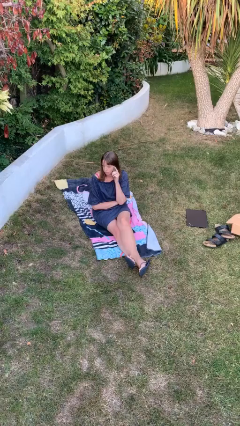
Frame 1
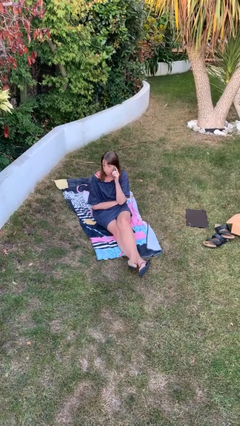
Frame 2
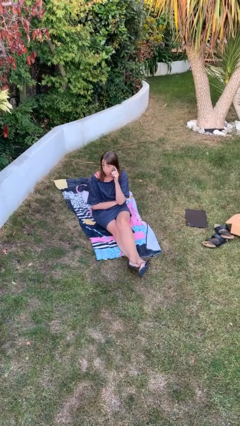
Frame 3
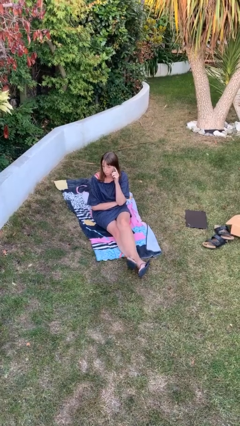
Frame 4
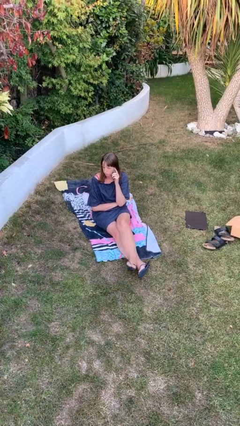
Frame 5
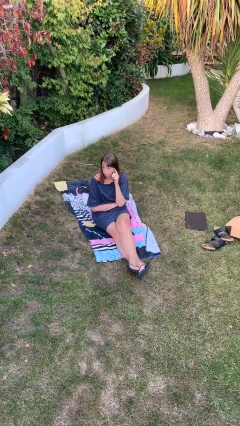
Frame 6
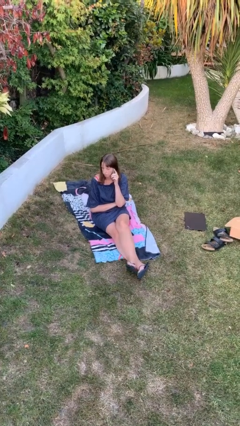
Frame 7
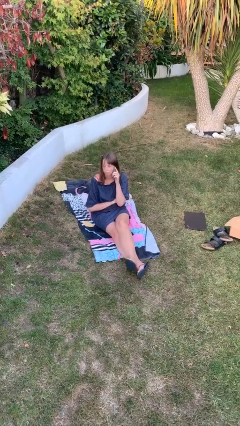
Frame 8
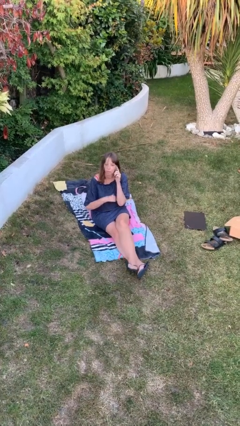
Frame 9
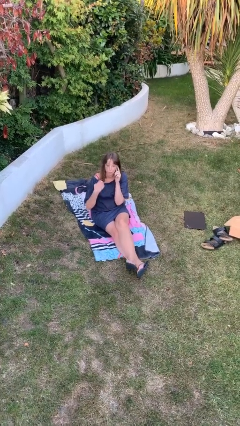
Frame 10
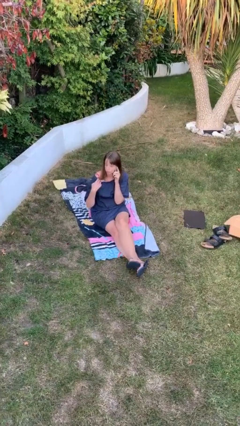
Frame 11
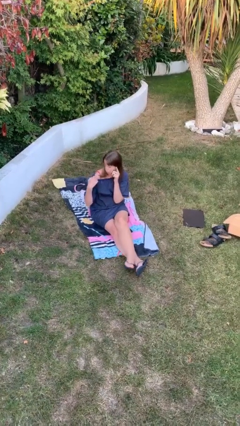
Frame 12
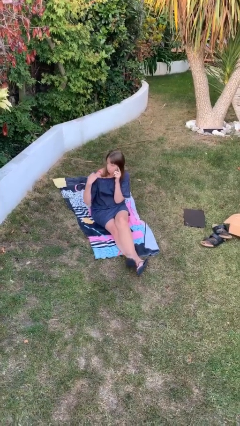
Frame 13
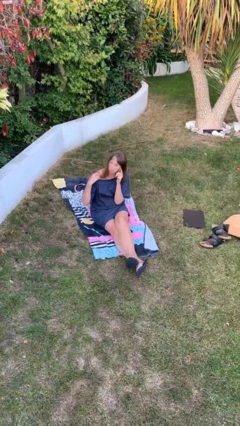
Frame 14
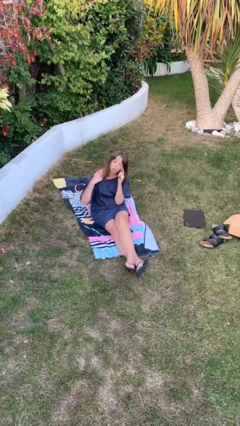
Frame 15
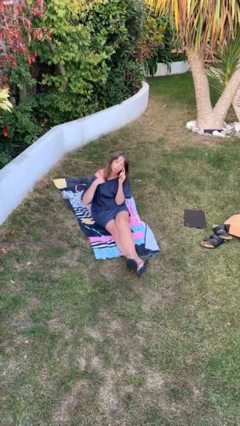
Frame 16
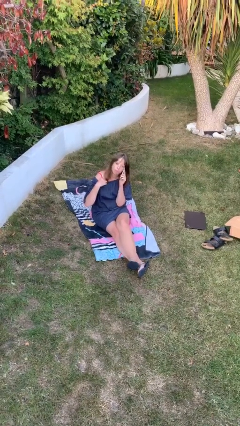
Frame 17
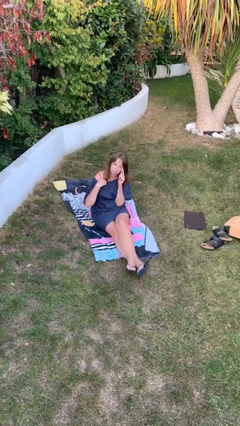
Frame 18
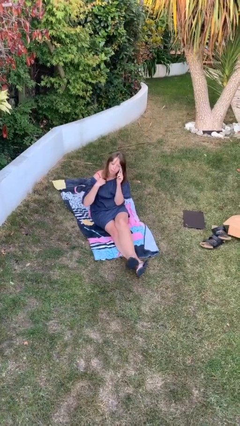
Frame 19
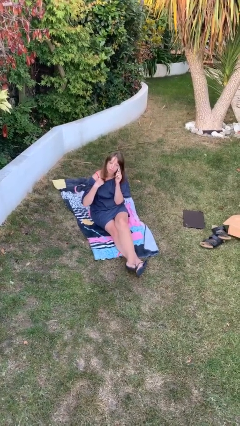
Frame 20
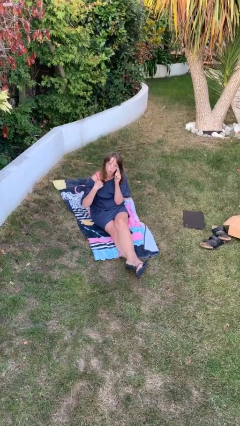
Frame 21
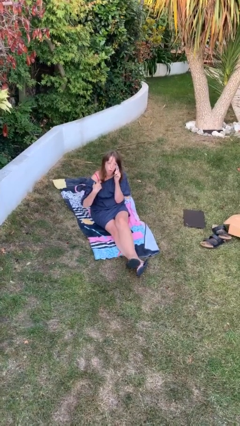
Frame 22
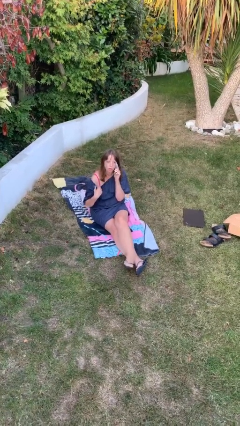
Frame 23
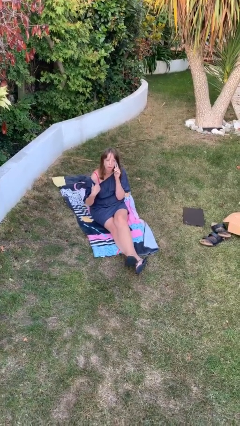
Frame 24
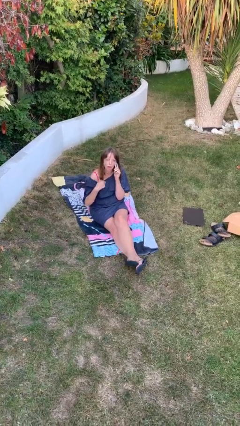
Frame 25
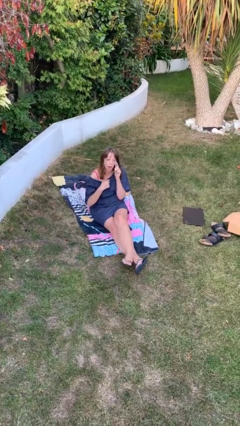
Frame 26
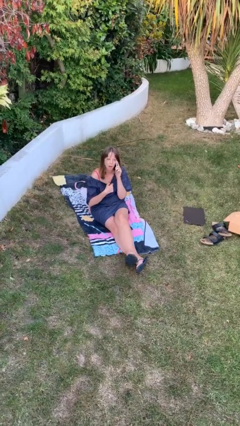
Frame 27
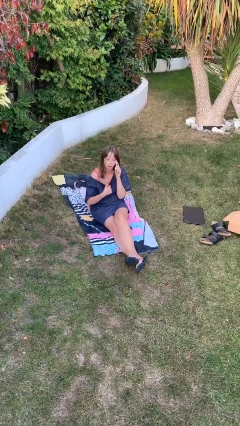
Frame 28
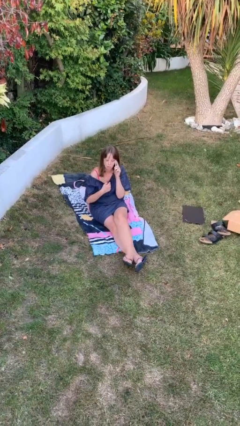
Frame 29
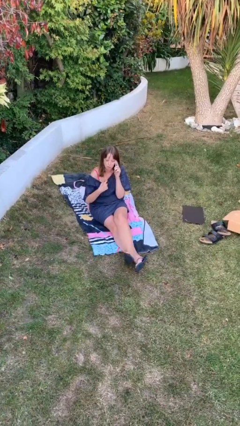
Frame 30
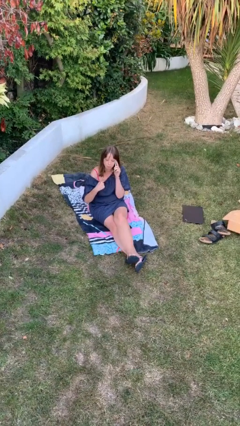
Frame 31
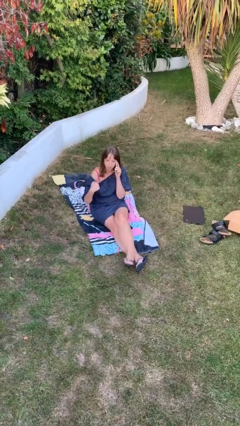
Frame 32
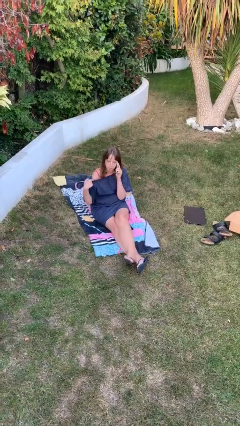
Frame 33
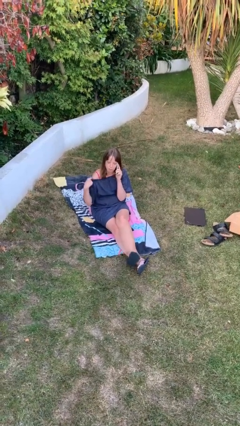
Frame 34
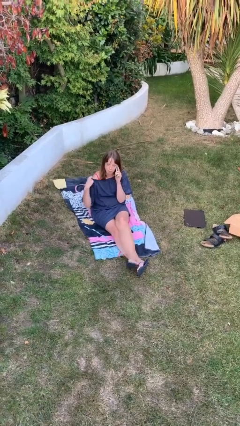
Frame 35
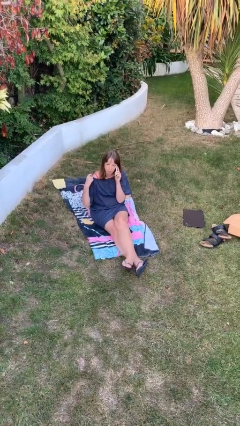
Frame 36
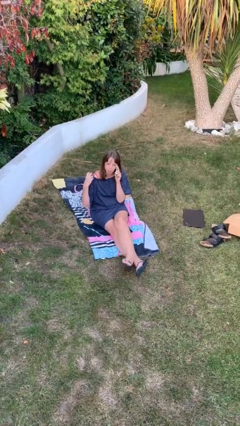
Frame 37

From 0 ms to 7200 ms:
person talks on phone

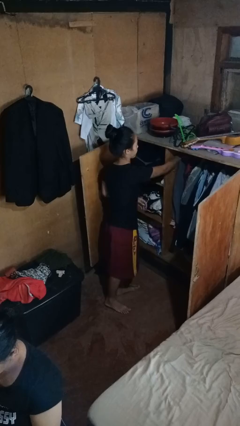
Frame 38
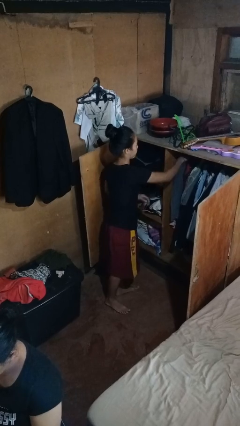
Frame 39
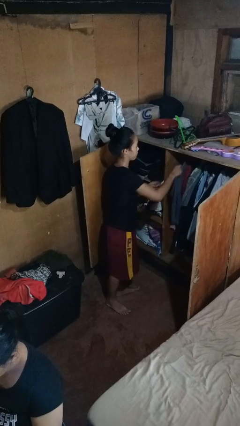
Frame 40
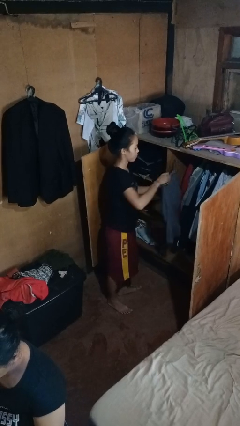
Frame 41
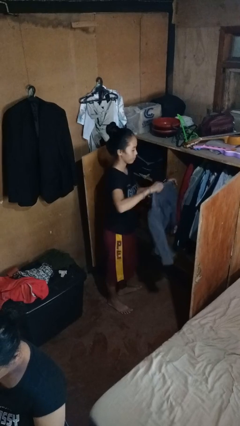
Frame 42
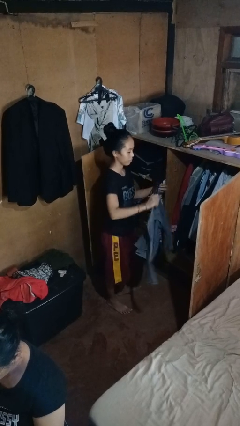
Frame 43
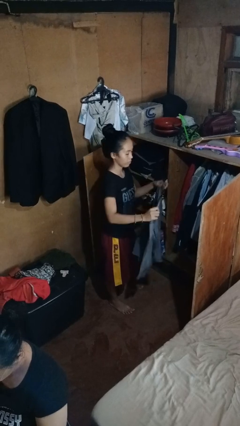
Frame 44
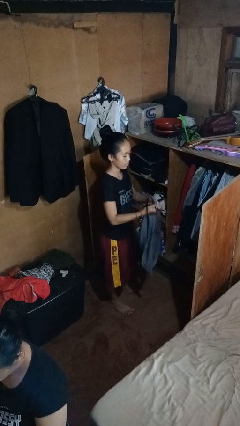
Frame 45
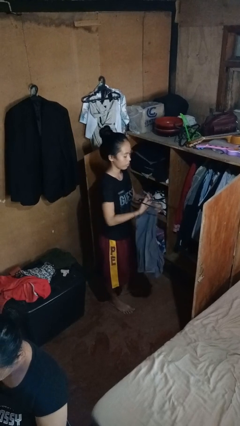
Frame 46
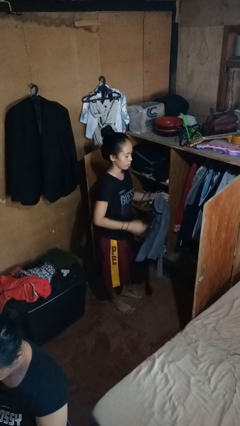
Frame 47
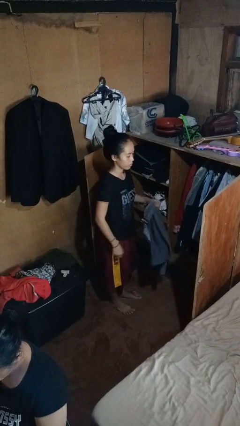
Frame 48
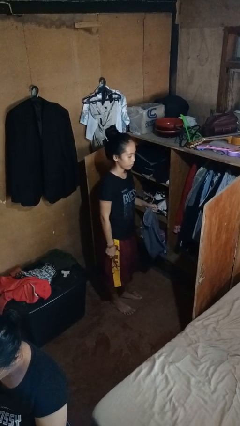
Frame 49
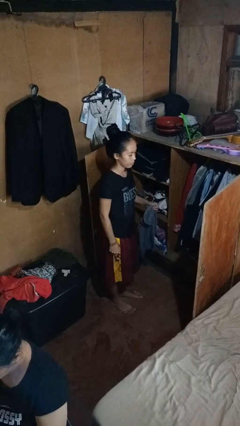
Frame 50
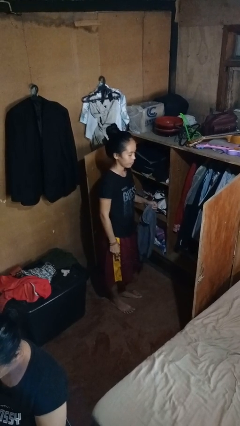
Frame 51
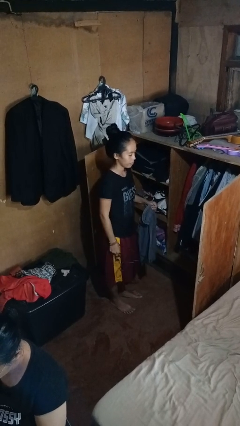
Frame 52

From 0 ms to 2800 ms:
person takes clothes from closet

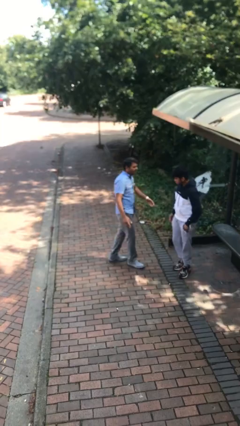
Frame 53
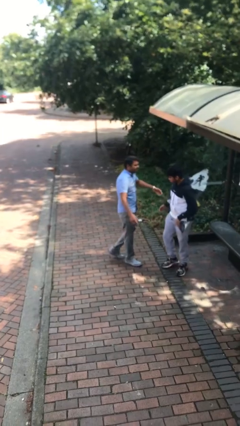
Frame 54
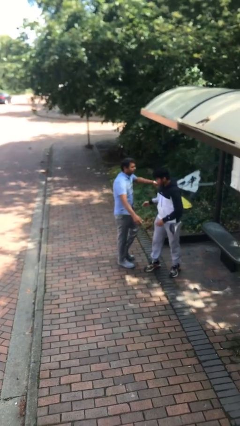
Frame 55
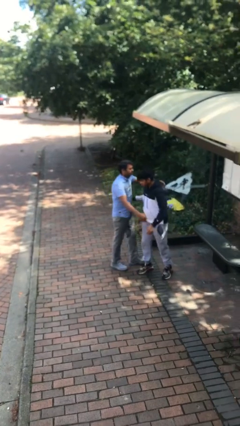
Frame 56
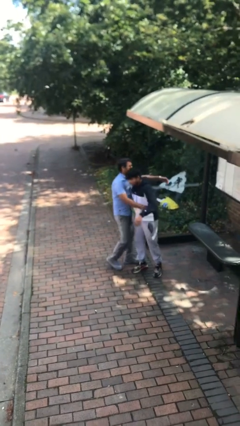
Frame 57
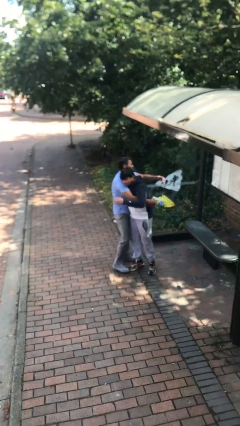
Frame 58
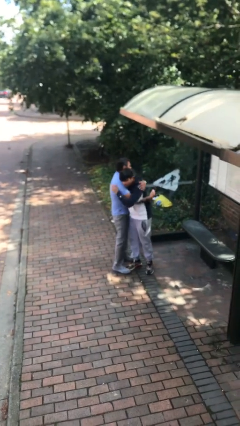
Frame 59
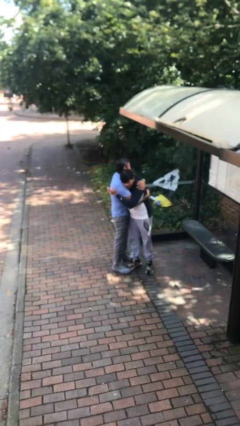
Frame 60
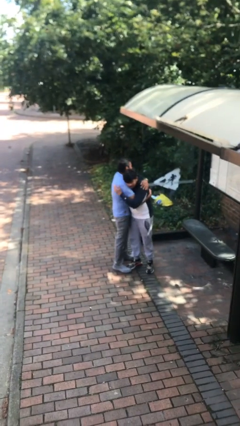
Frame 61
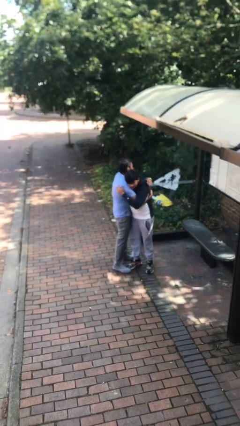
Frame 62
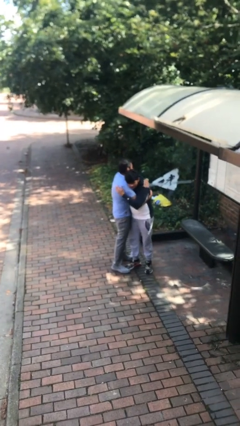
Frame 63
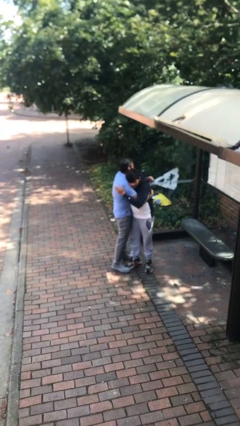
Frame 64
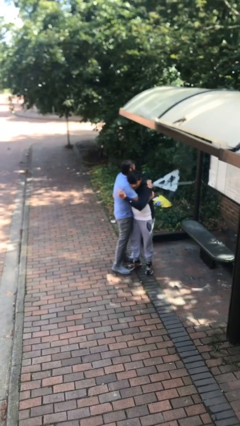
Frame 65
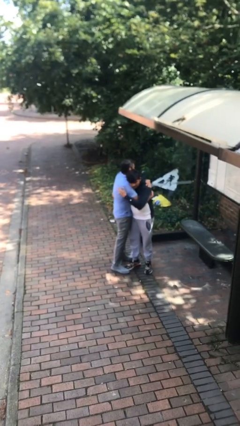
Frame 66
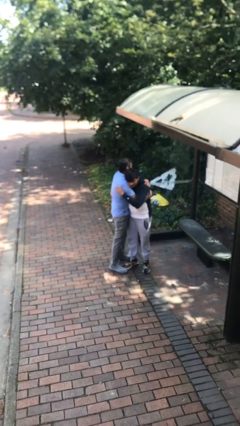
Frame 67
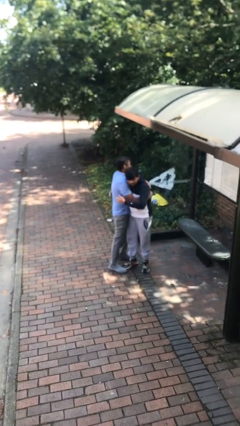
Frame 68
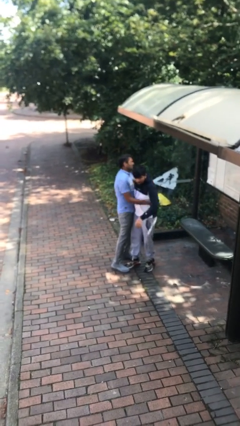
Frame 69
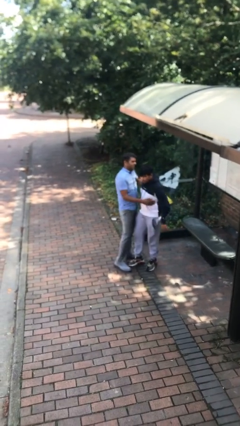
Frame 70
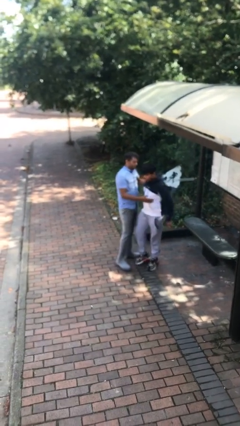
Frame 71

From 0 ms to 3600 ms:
person embraces person

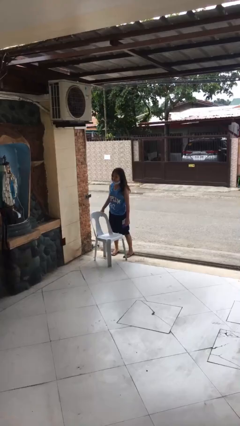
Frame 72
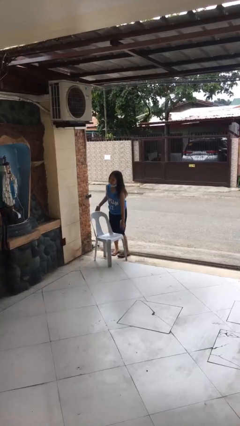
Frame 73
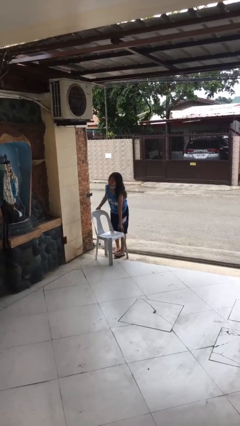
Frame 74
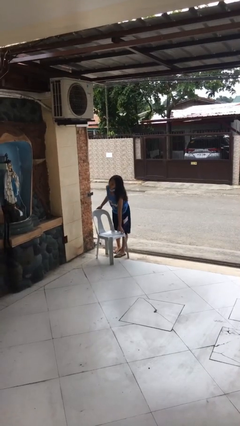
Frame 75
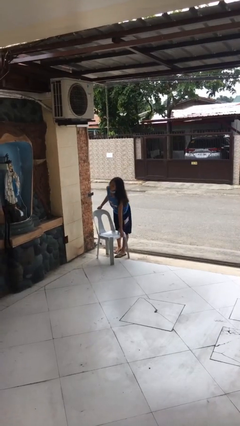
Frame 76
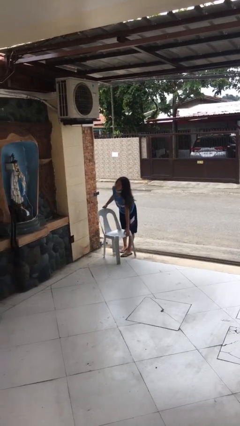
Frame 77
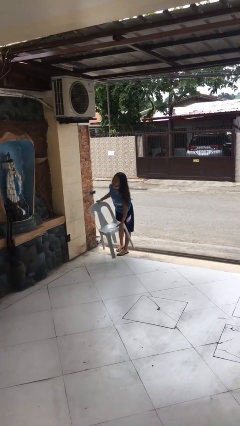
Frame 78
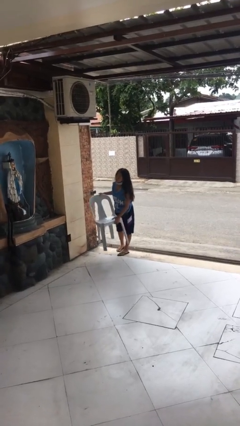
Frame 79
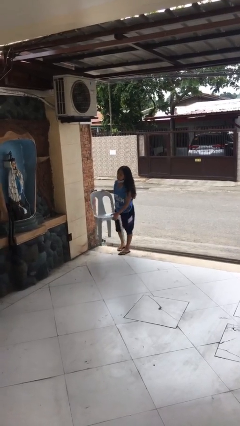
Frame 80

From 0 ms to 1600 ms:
person picks up object from floor

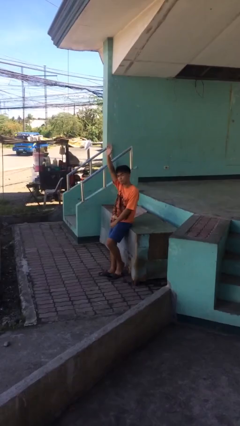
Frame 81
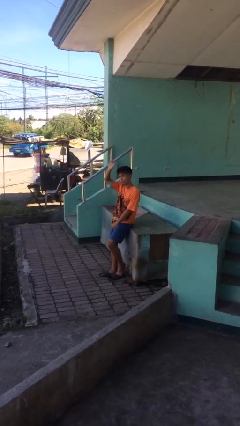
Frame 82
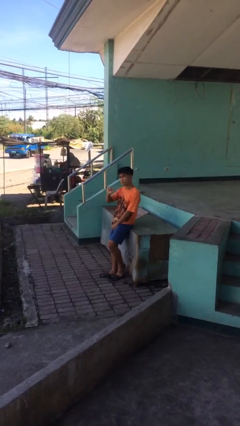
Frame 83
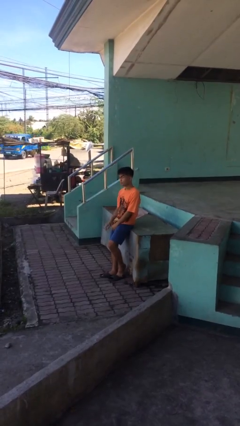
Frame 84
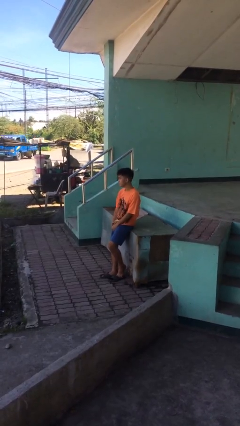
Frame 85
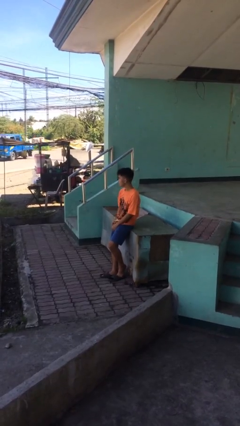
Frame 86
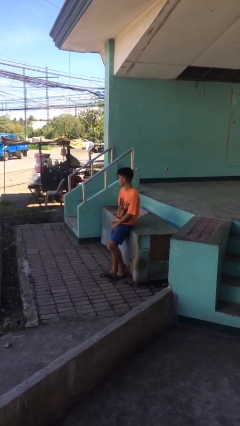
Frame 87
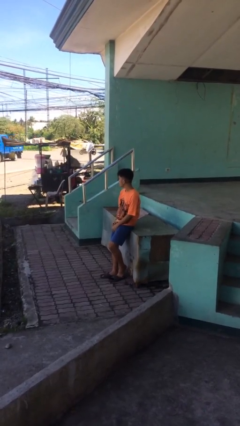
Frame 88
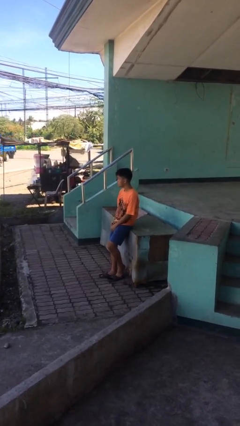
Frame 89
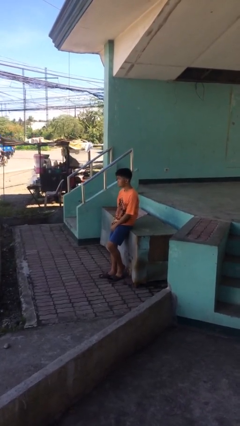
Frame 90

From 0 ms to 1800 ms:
person gestures lower hand

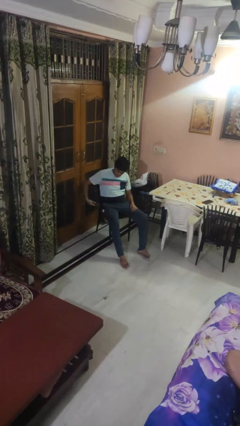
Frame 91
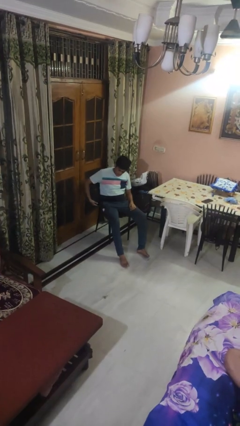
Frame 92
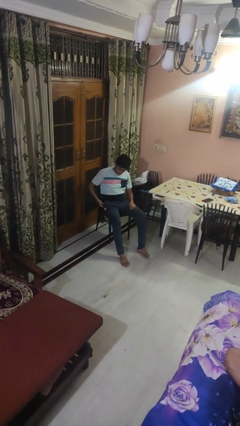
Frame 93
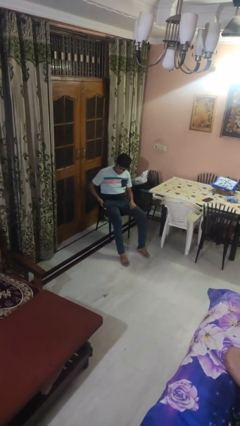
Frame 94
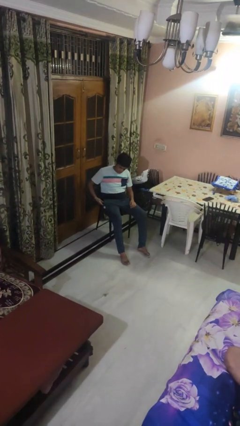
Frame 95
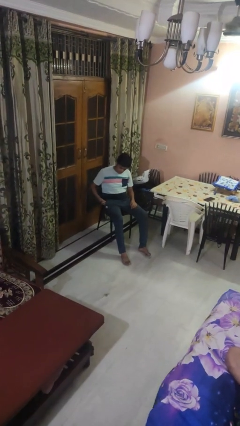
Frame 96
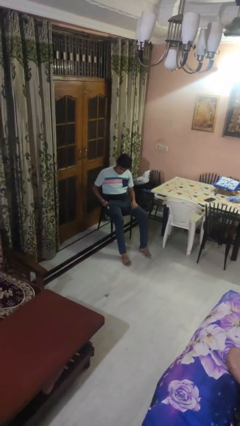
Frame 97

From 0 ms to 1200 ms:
person puts phone into pocket
